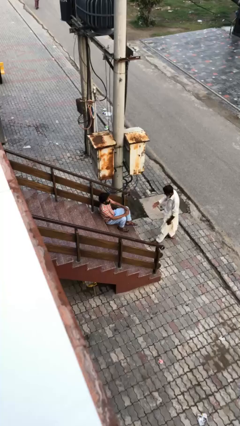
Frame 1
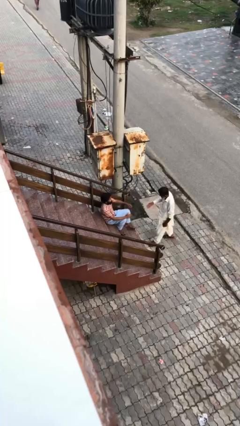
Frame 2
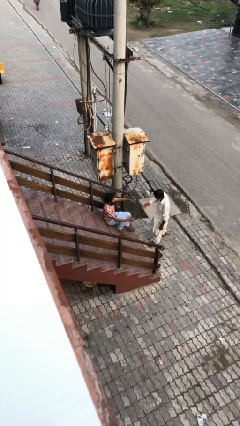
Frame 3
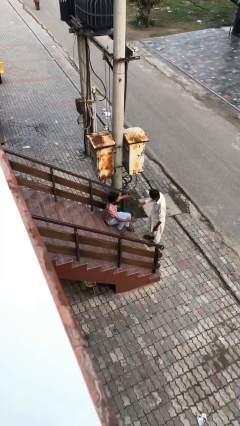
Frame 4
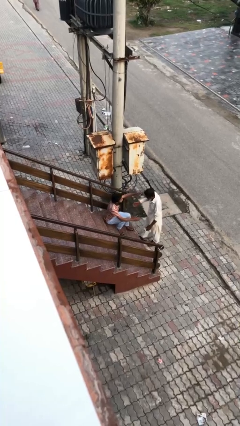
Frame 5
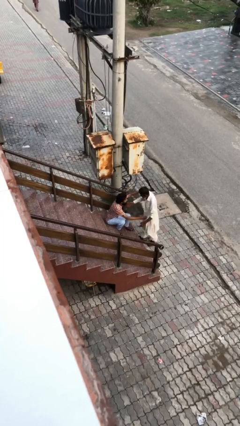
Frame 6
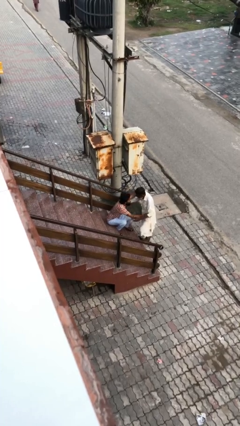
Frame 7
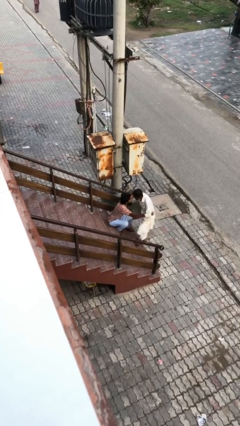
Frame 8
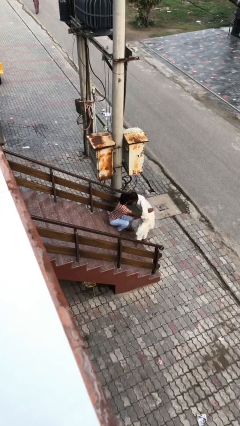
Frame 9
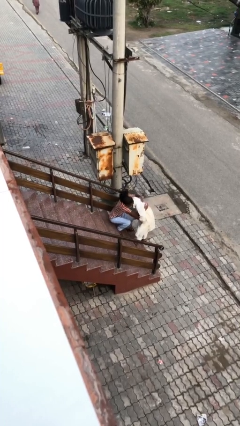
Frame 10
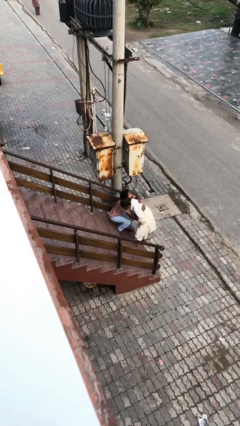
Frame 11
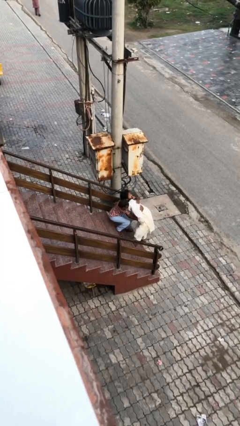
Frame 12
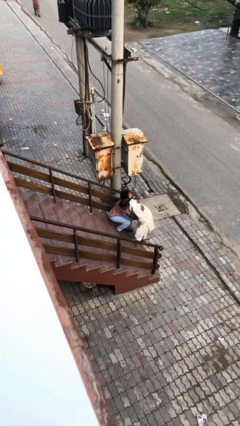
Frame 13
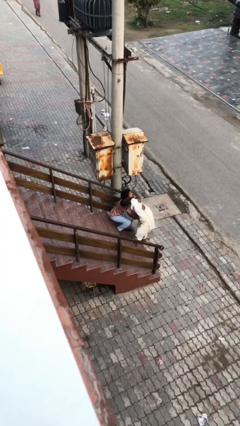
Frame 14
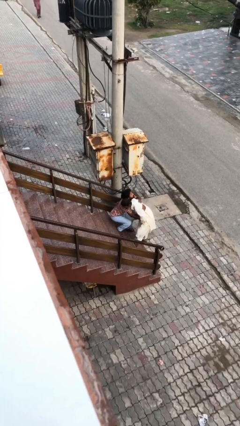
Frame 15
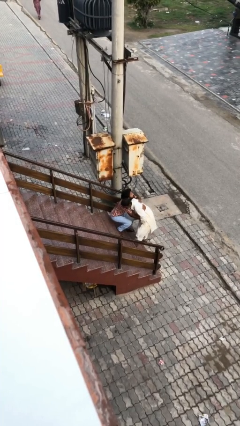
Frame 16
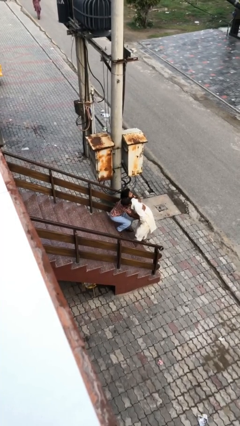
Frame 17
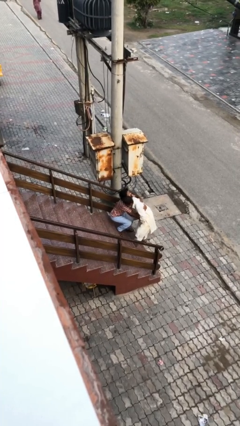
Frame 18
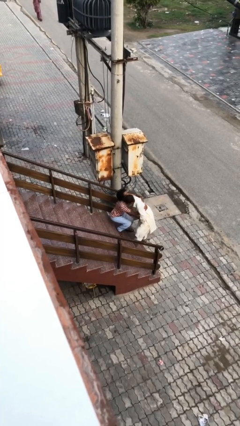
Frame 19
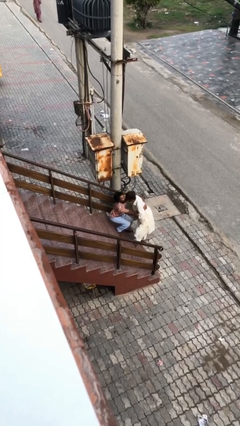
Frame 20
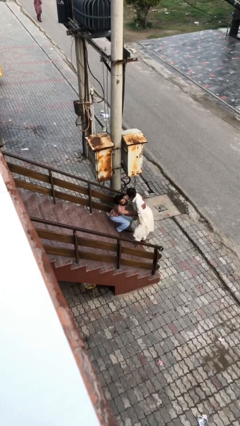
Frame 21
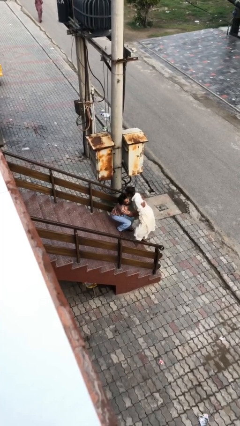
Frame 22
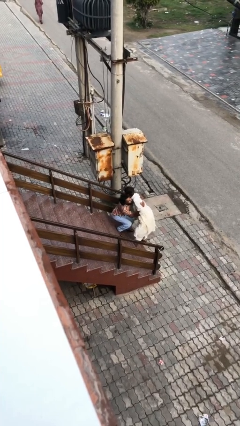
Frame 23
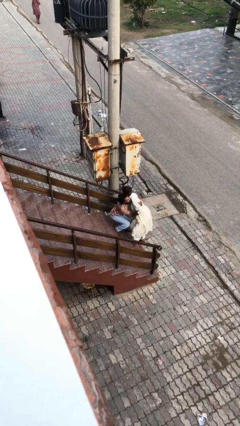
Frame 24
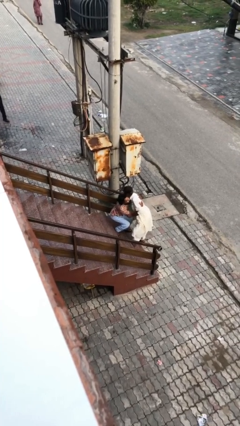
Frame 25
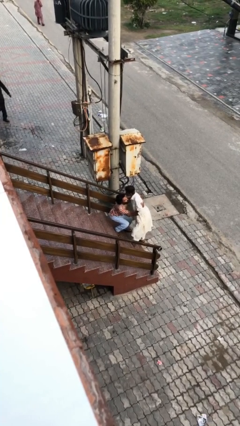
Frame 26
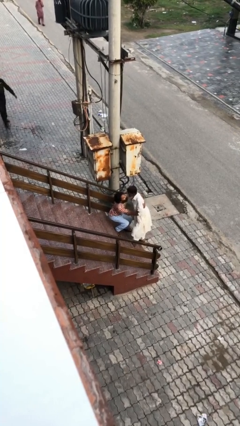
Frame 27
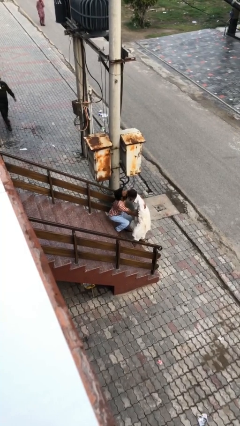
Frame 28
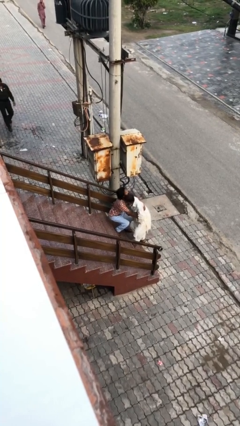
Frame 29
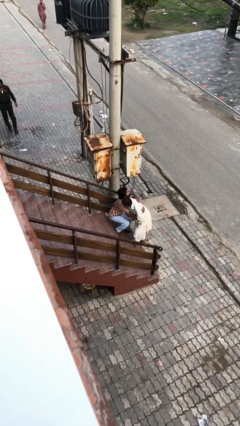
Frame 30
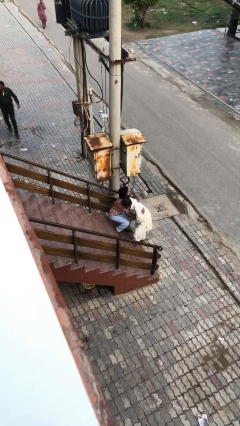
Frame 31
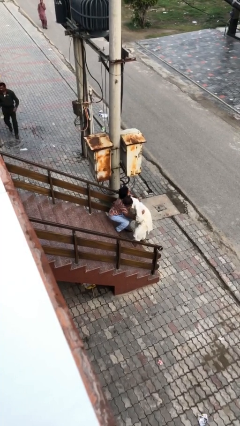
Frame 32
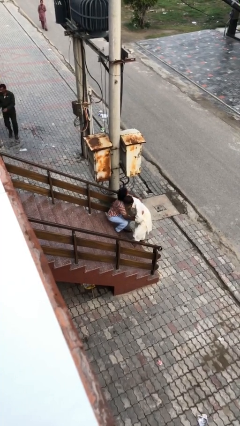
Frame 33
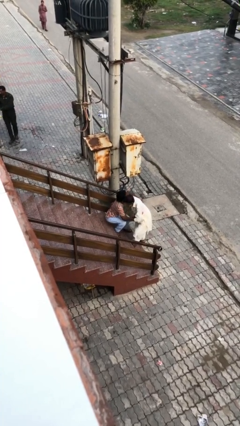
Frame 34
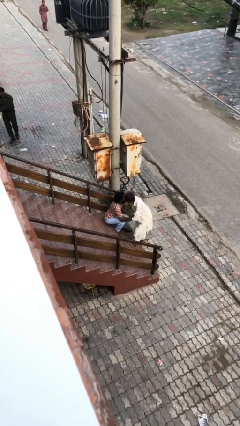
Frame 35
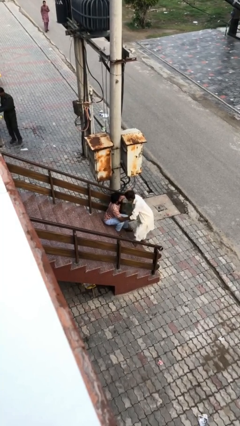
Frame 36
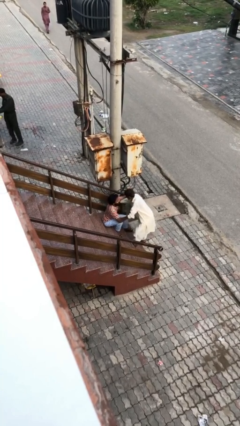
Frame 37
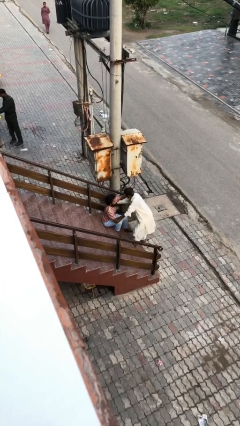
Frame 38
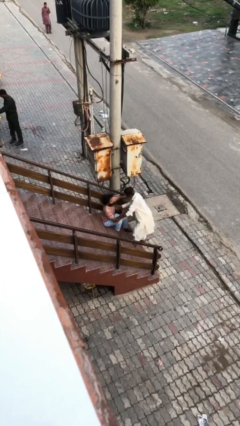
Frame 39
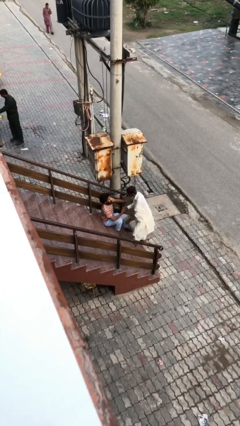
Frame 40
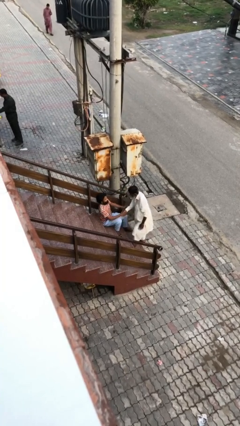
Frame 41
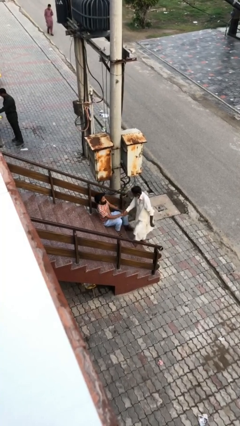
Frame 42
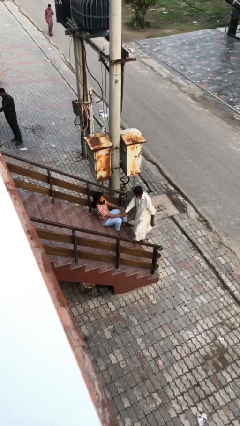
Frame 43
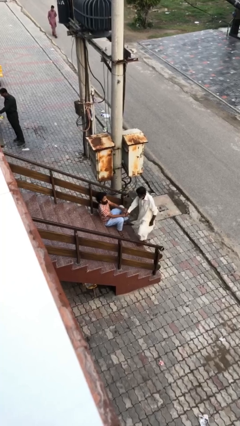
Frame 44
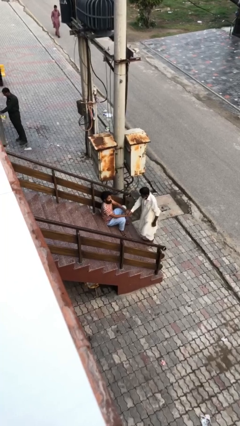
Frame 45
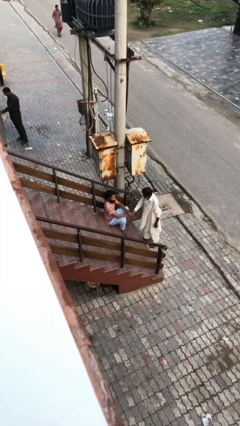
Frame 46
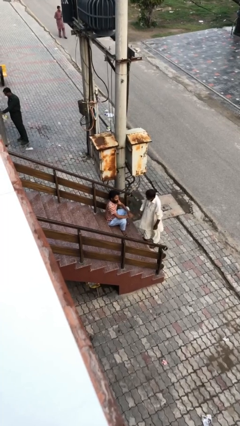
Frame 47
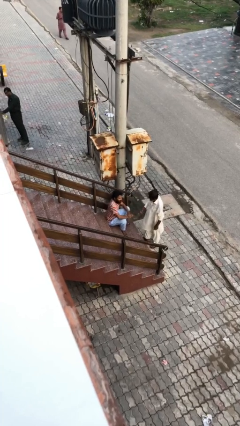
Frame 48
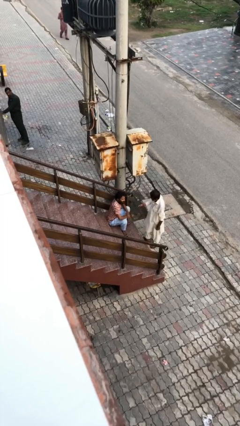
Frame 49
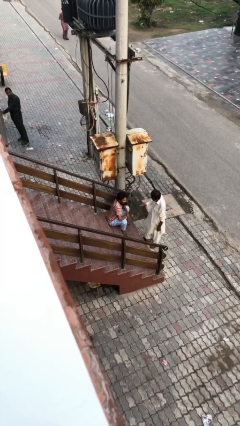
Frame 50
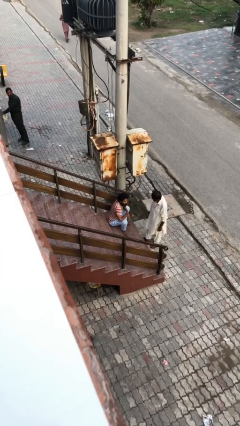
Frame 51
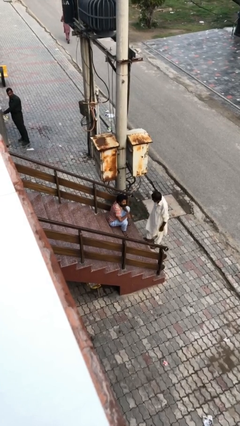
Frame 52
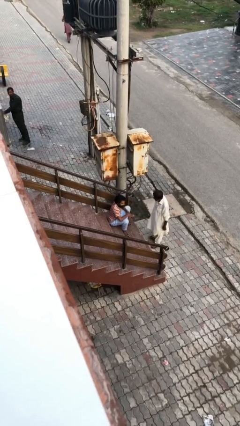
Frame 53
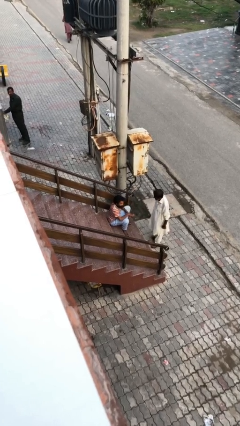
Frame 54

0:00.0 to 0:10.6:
person embraces person

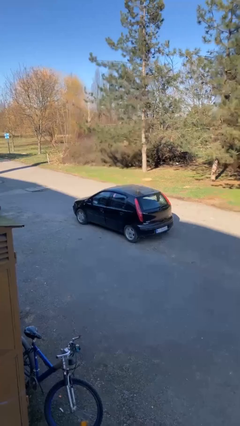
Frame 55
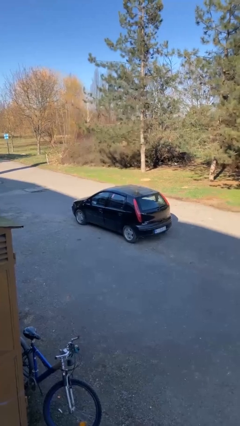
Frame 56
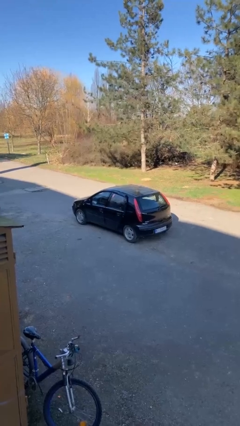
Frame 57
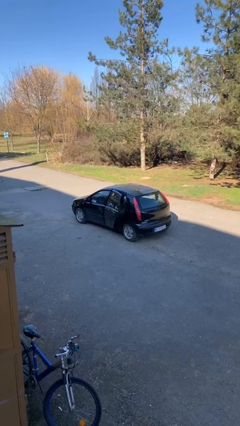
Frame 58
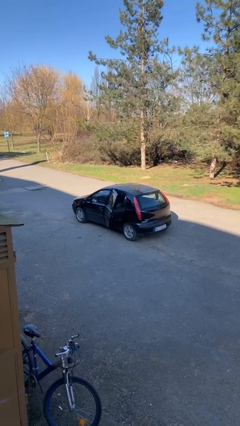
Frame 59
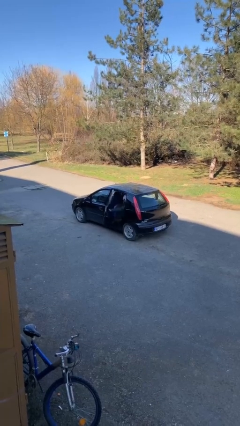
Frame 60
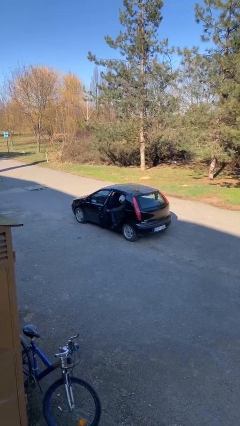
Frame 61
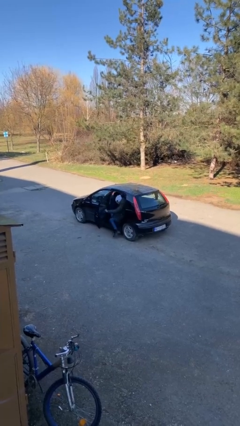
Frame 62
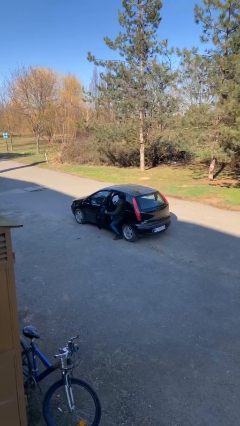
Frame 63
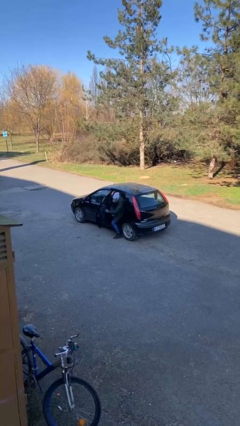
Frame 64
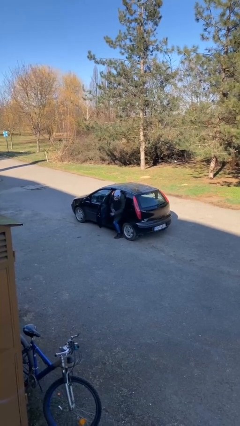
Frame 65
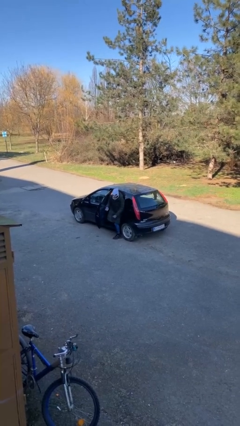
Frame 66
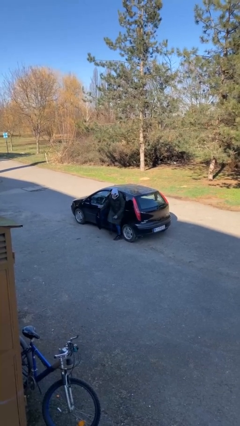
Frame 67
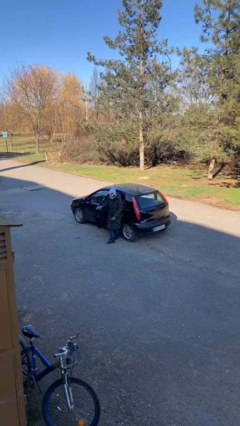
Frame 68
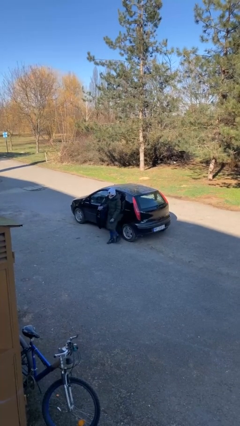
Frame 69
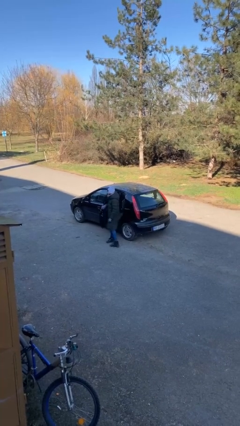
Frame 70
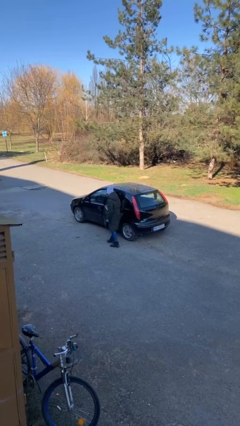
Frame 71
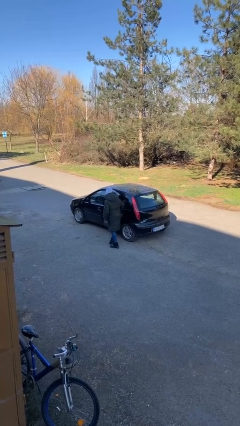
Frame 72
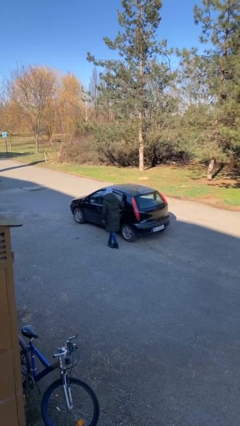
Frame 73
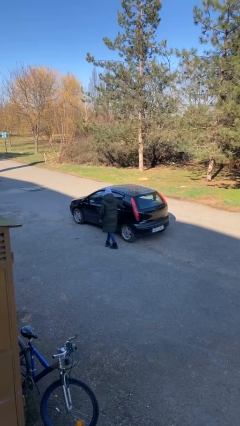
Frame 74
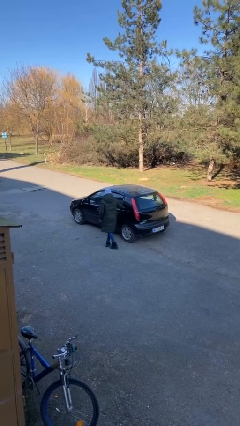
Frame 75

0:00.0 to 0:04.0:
car drops off person

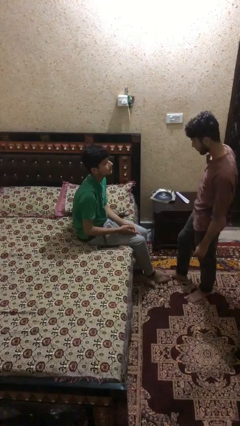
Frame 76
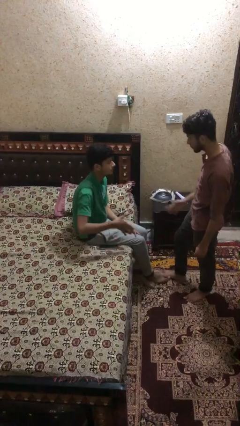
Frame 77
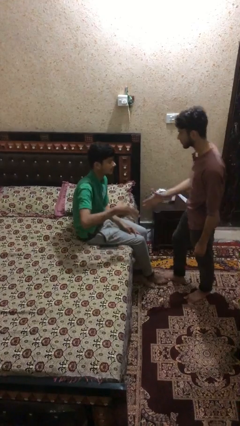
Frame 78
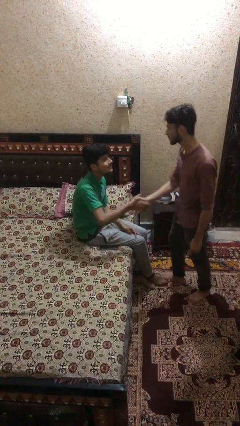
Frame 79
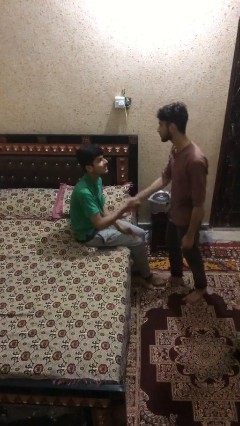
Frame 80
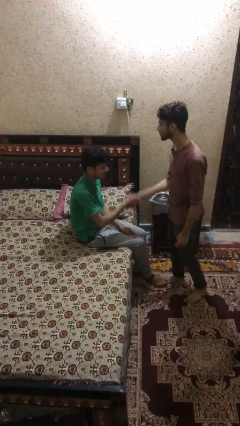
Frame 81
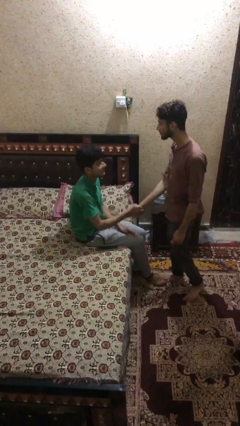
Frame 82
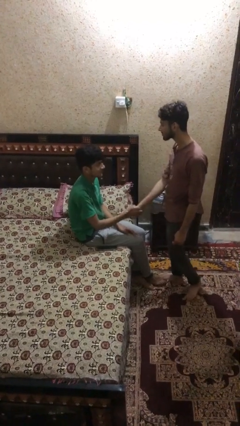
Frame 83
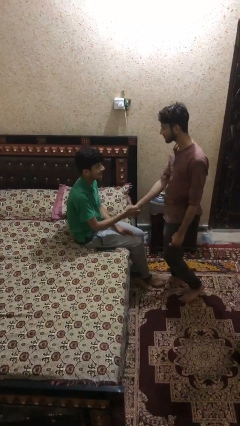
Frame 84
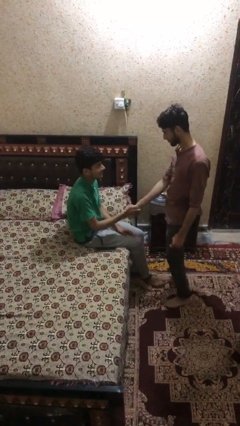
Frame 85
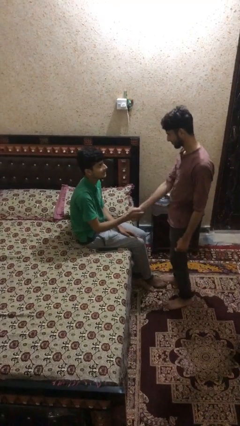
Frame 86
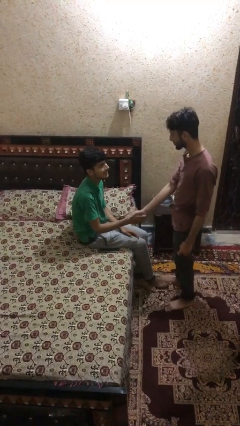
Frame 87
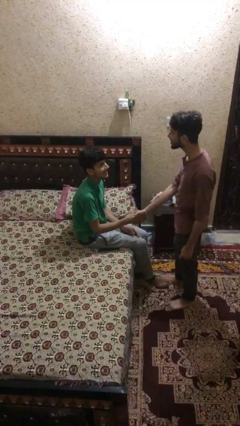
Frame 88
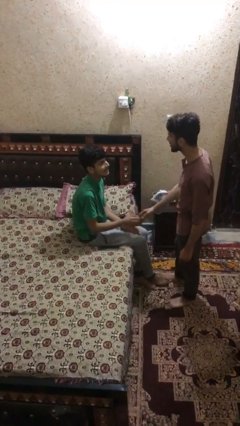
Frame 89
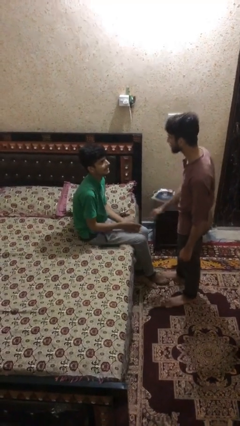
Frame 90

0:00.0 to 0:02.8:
person shakes hand

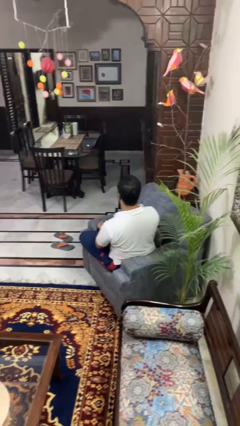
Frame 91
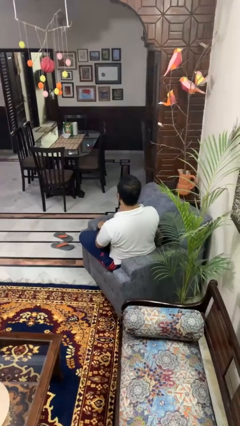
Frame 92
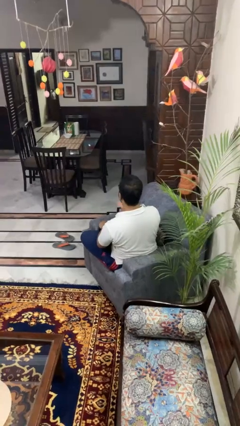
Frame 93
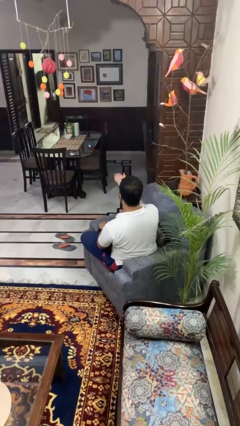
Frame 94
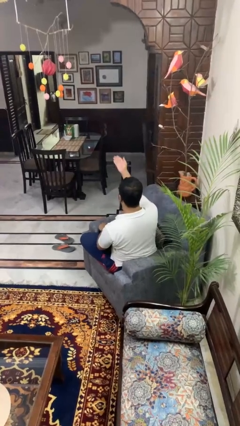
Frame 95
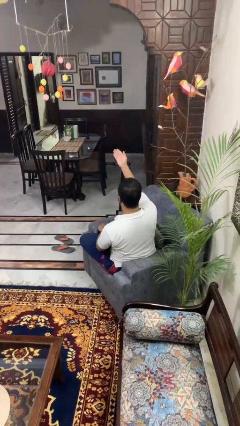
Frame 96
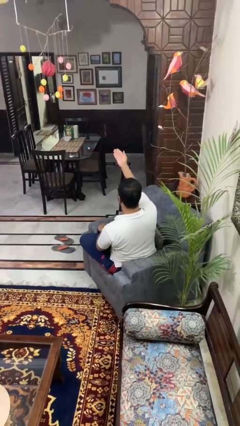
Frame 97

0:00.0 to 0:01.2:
person gestures swipe up
